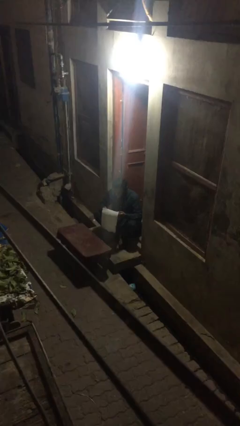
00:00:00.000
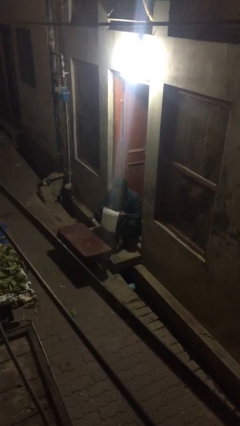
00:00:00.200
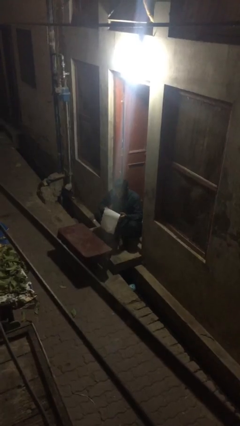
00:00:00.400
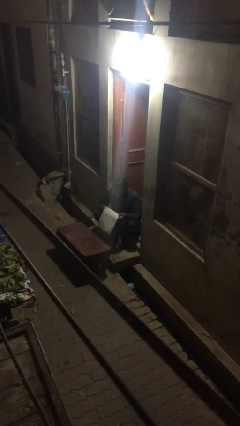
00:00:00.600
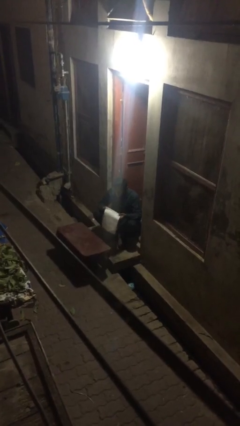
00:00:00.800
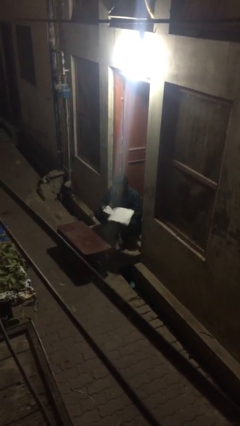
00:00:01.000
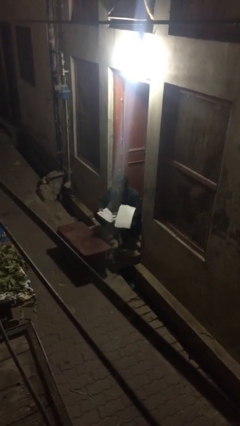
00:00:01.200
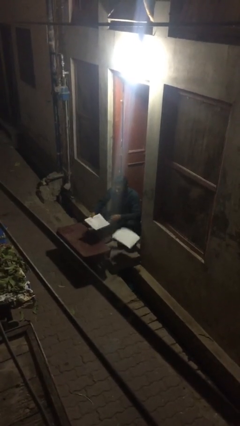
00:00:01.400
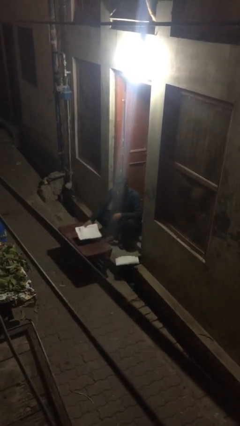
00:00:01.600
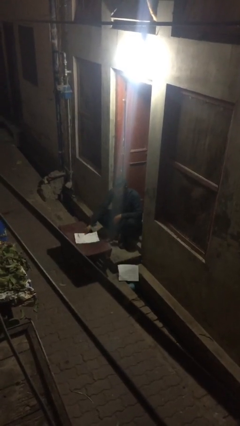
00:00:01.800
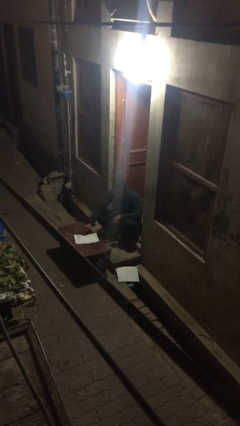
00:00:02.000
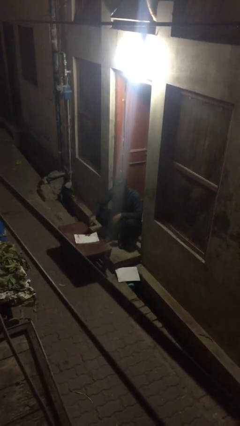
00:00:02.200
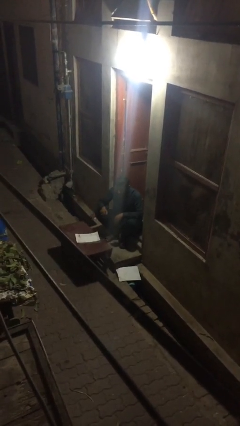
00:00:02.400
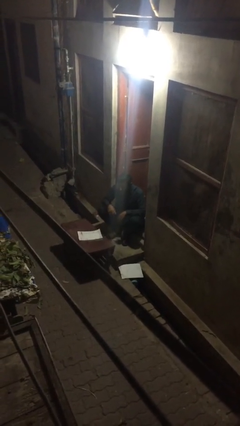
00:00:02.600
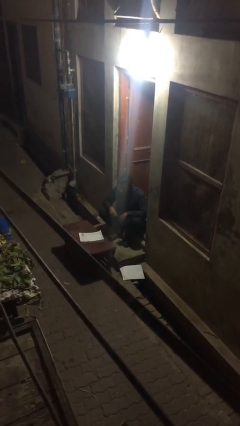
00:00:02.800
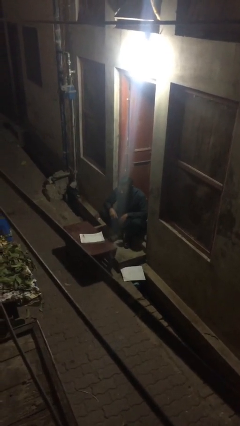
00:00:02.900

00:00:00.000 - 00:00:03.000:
person puts down object on table

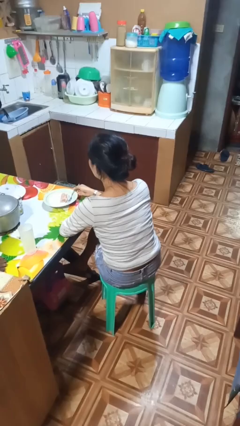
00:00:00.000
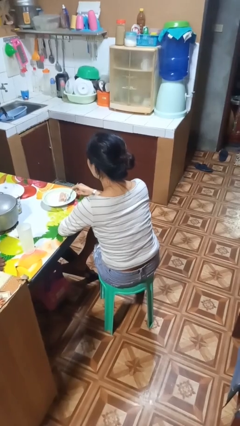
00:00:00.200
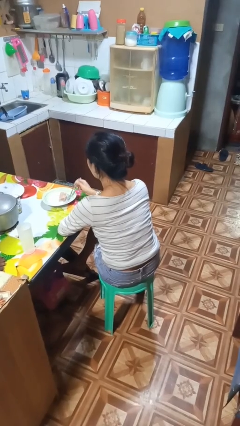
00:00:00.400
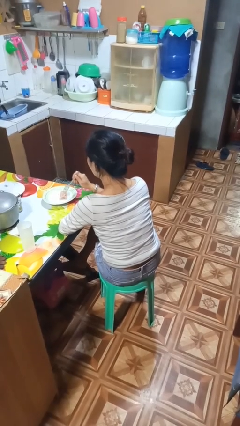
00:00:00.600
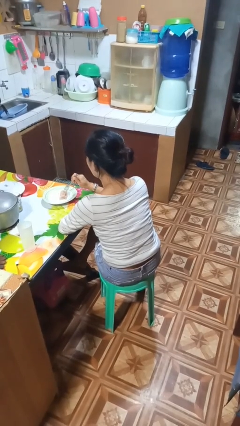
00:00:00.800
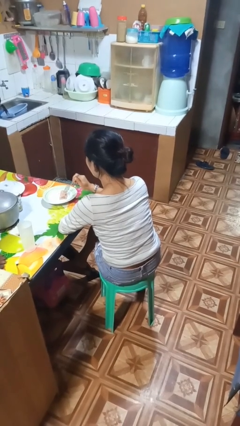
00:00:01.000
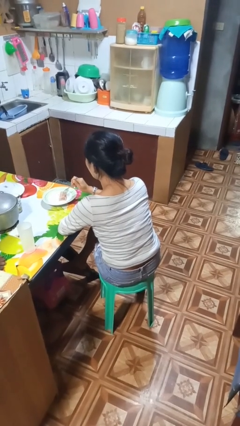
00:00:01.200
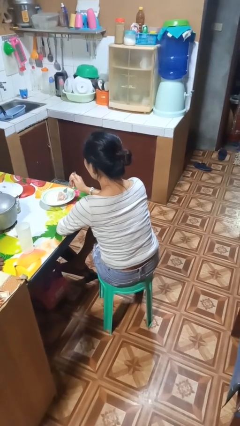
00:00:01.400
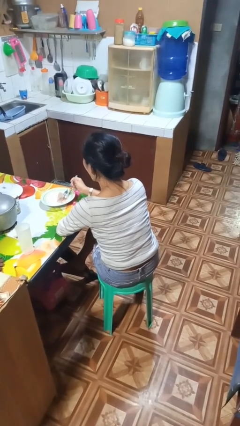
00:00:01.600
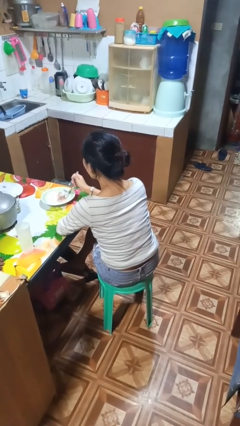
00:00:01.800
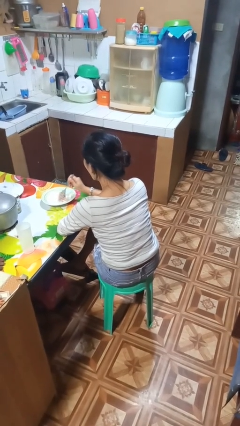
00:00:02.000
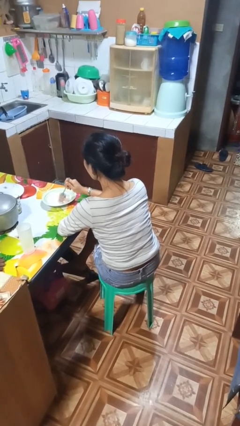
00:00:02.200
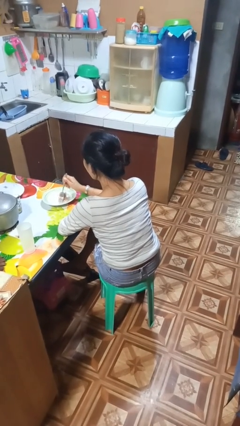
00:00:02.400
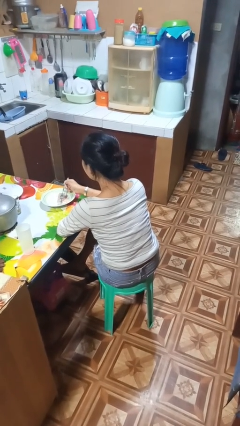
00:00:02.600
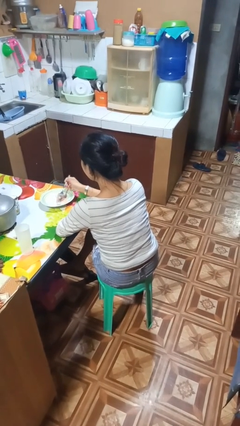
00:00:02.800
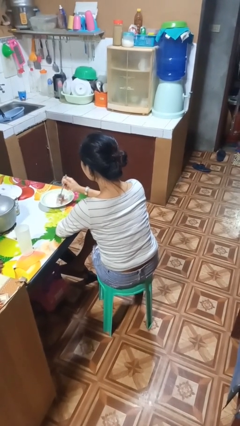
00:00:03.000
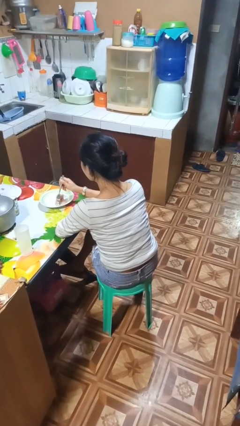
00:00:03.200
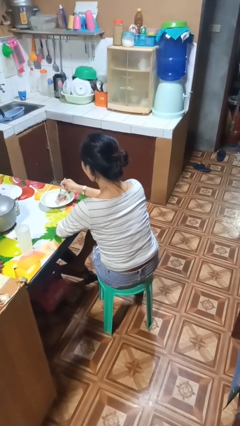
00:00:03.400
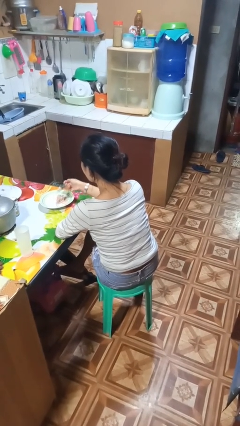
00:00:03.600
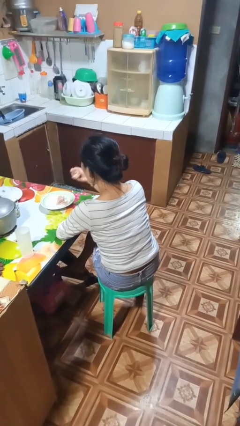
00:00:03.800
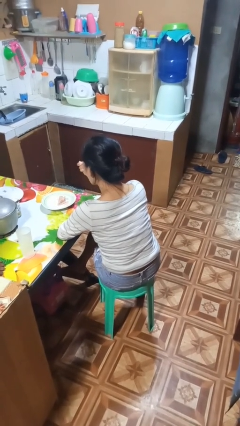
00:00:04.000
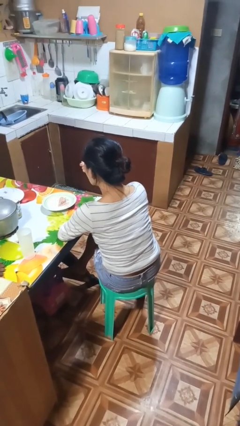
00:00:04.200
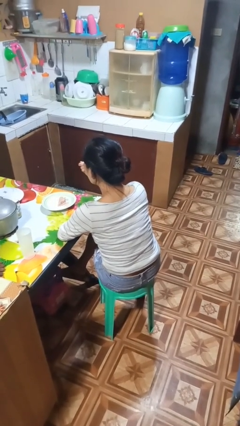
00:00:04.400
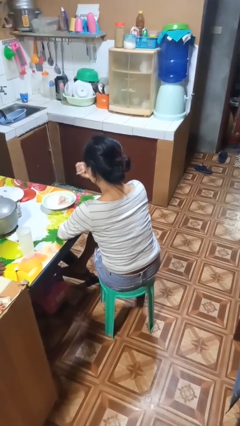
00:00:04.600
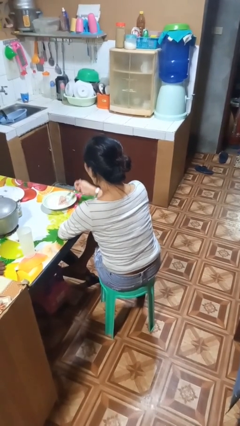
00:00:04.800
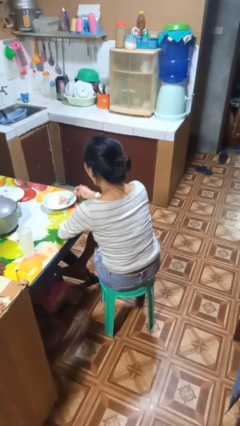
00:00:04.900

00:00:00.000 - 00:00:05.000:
person eats with utensil

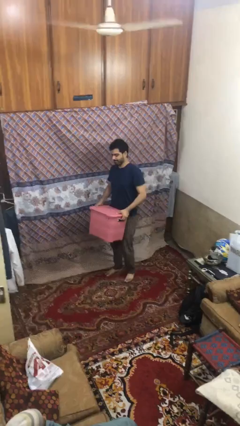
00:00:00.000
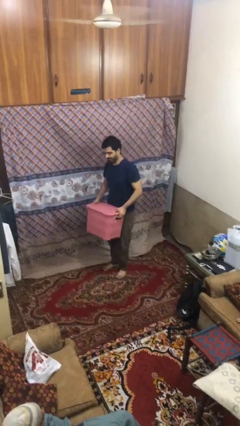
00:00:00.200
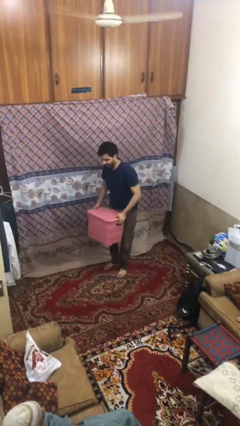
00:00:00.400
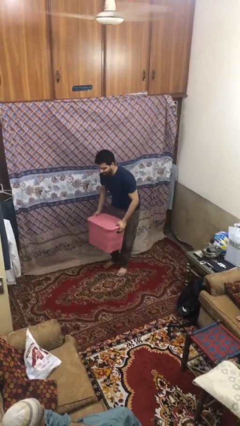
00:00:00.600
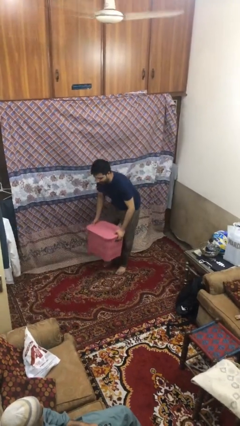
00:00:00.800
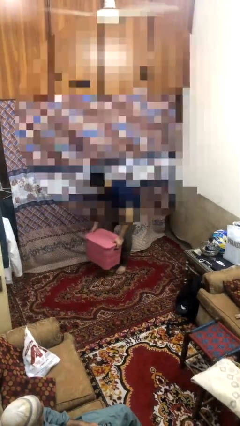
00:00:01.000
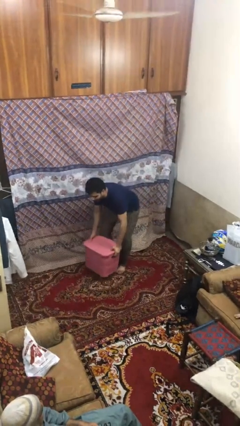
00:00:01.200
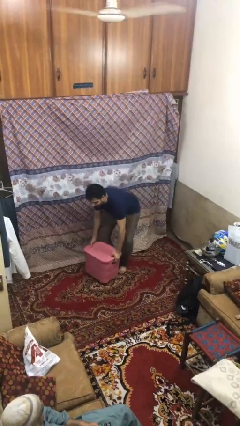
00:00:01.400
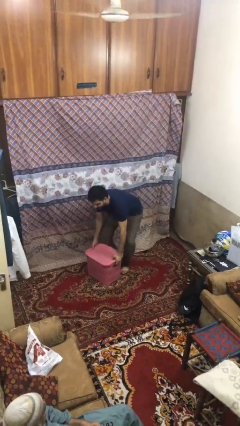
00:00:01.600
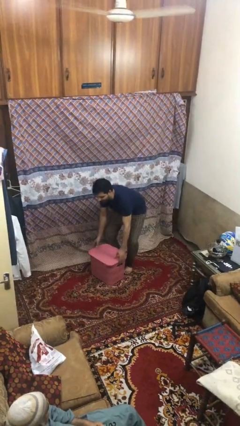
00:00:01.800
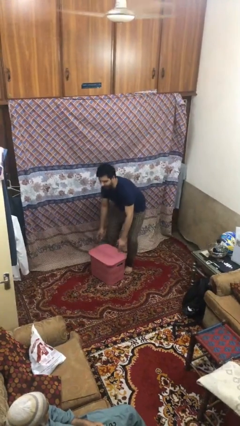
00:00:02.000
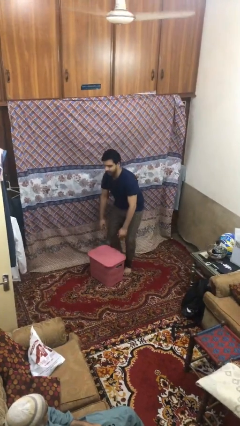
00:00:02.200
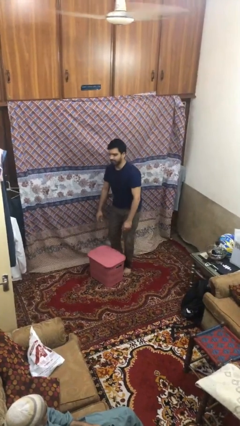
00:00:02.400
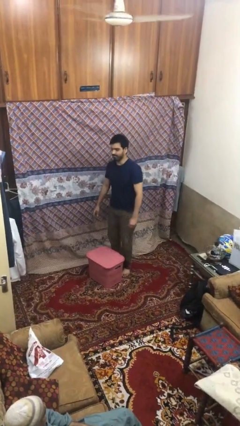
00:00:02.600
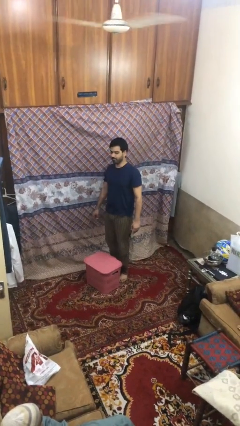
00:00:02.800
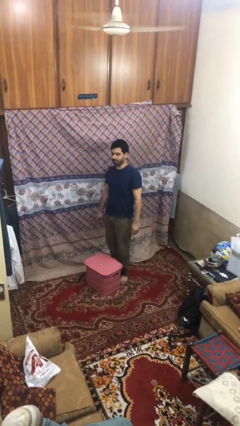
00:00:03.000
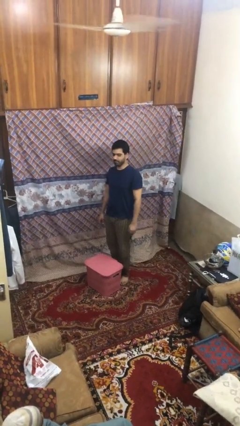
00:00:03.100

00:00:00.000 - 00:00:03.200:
person puts down object on floor

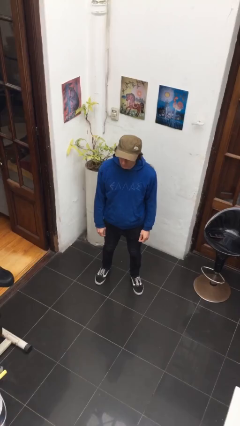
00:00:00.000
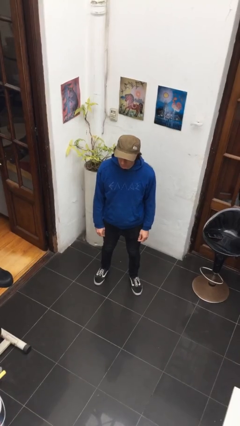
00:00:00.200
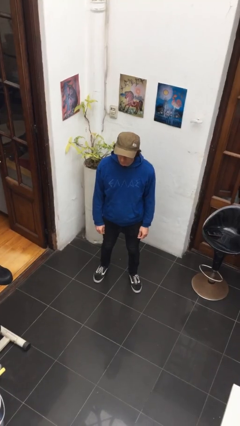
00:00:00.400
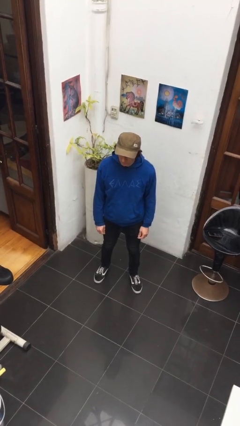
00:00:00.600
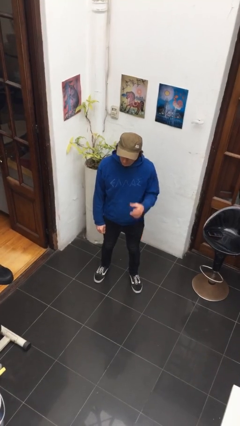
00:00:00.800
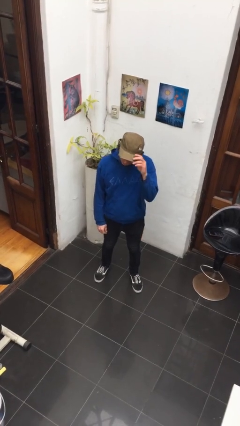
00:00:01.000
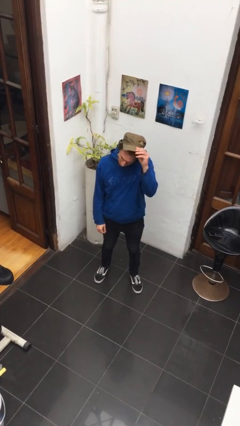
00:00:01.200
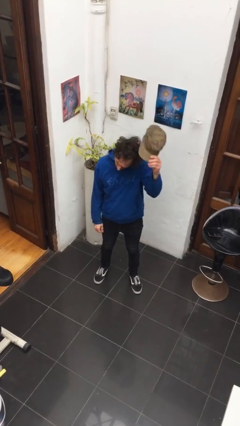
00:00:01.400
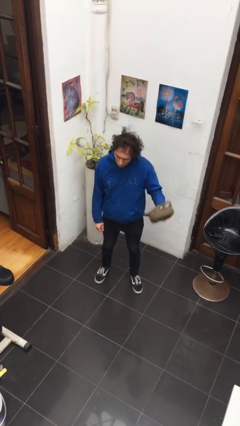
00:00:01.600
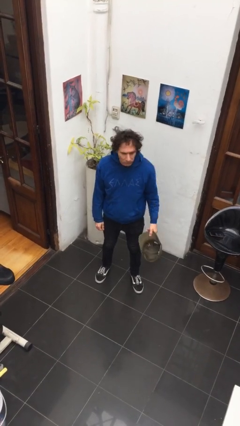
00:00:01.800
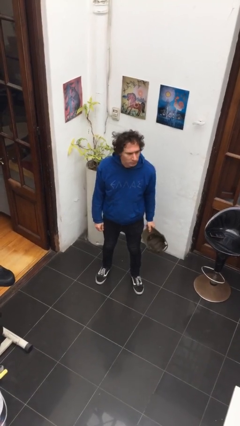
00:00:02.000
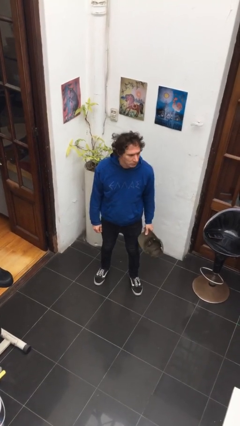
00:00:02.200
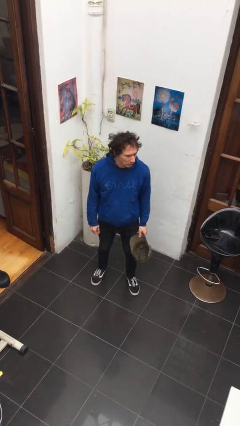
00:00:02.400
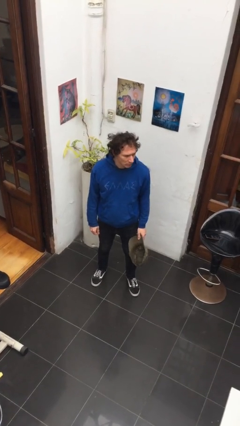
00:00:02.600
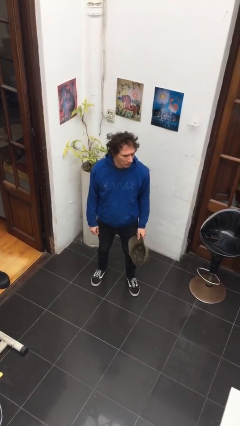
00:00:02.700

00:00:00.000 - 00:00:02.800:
person takes off hat

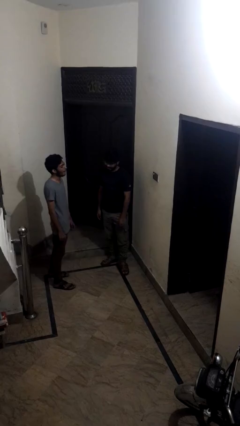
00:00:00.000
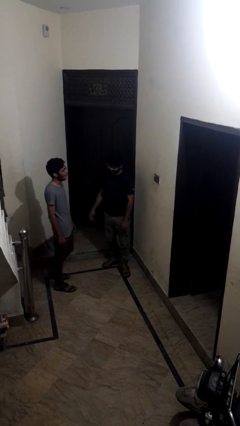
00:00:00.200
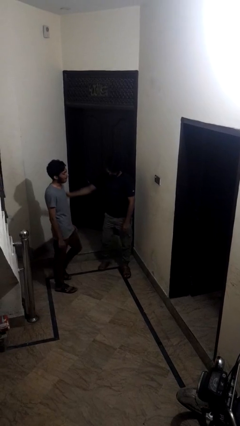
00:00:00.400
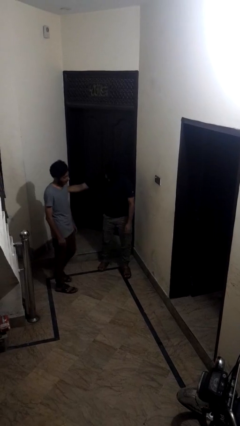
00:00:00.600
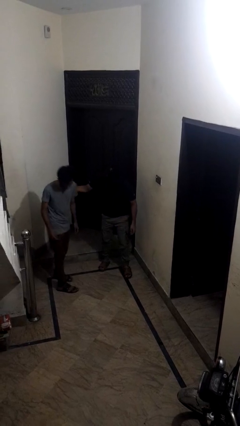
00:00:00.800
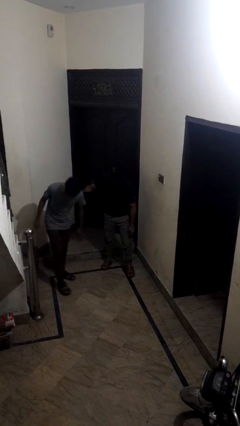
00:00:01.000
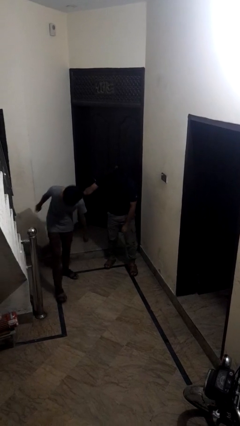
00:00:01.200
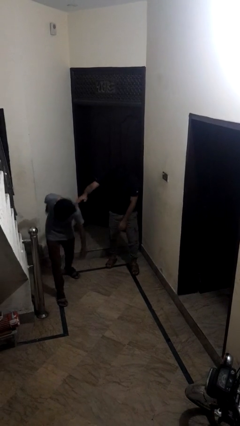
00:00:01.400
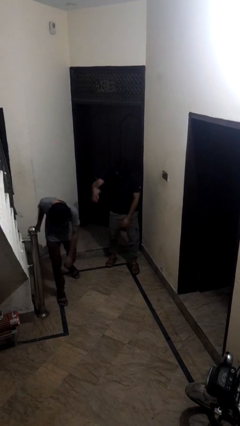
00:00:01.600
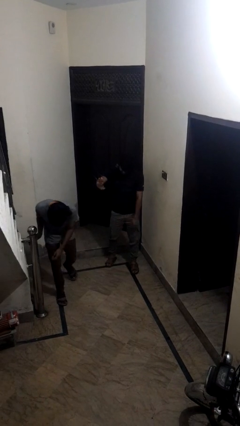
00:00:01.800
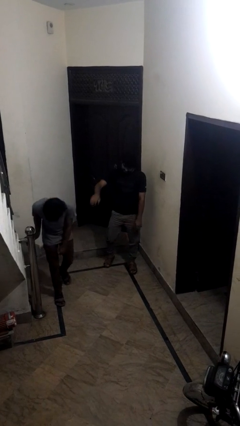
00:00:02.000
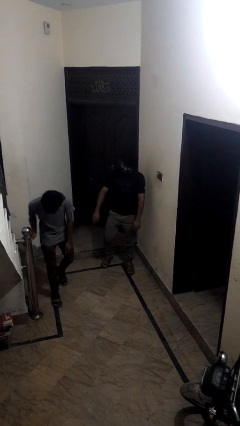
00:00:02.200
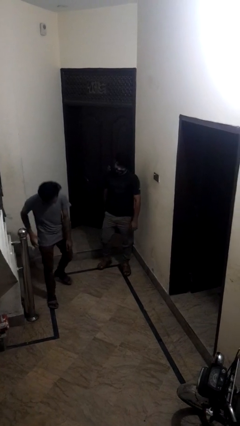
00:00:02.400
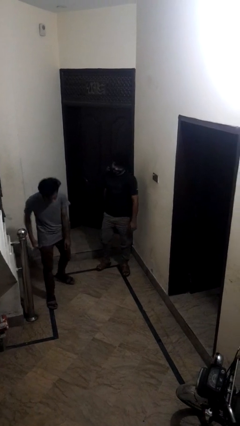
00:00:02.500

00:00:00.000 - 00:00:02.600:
person shoves person

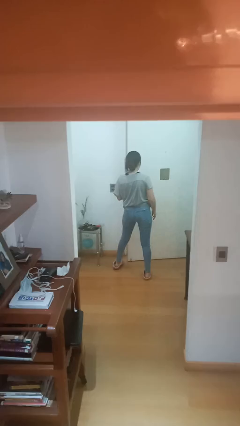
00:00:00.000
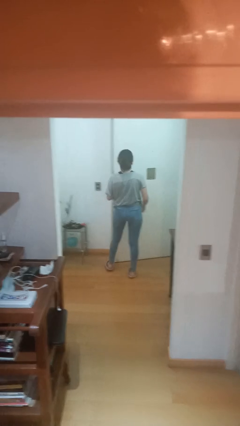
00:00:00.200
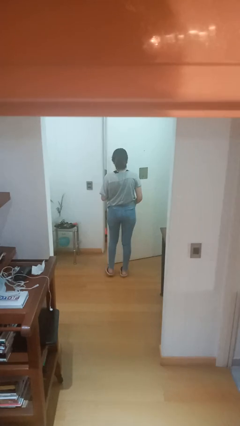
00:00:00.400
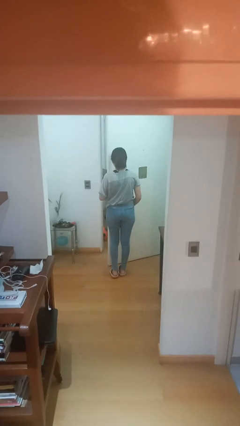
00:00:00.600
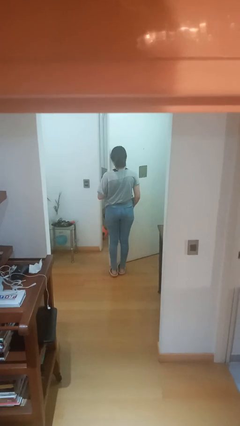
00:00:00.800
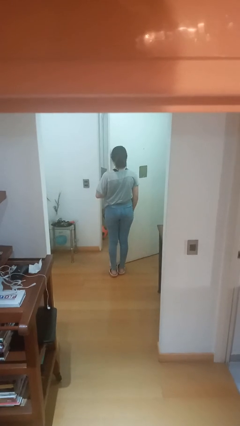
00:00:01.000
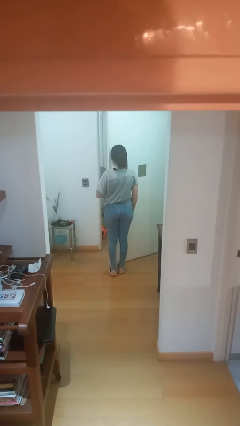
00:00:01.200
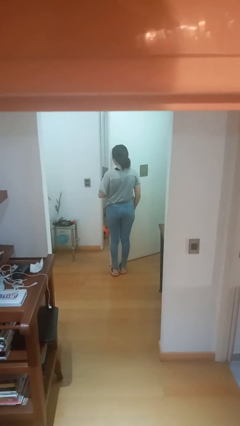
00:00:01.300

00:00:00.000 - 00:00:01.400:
person opens facility door
